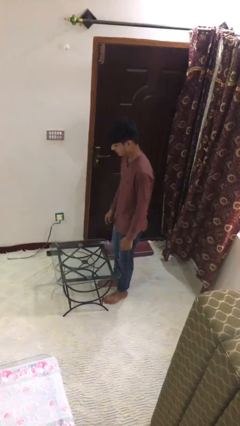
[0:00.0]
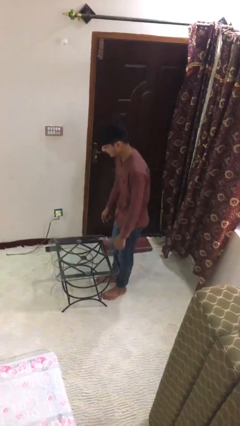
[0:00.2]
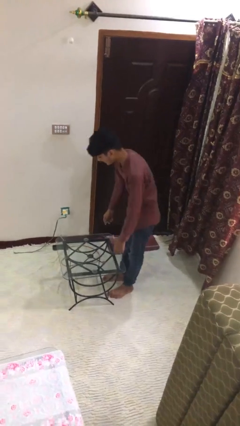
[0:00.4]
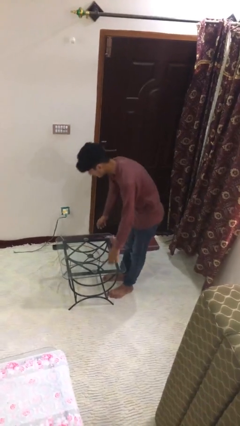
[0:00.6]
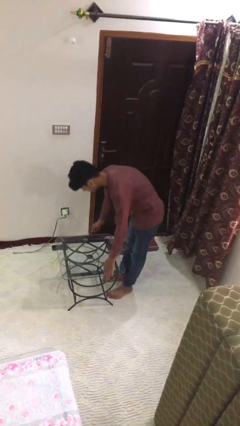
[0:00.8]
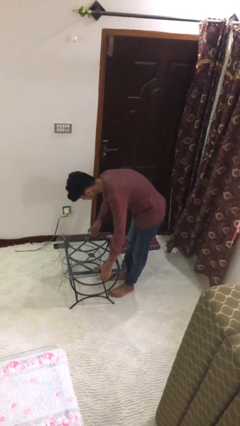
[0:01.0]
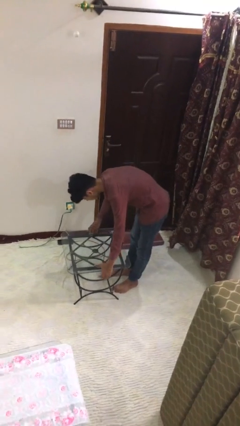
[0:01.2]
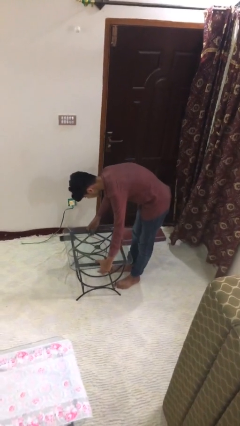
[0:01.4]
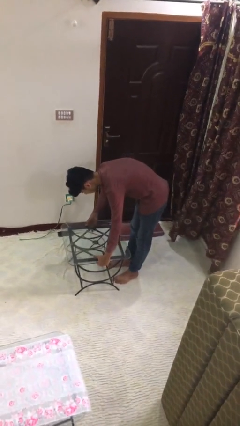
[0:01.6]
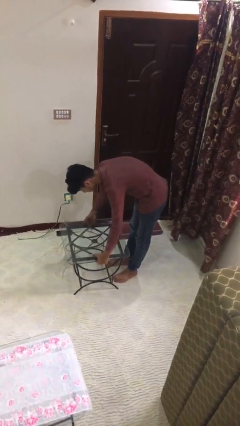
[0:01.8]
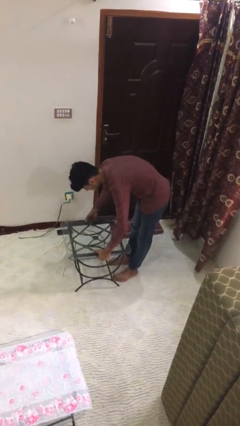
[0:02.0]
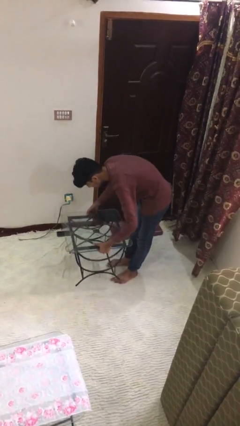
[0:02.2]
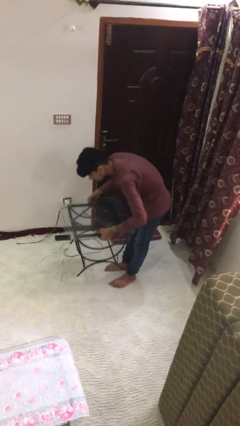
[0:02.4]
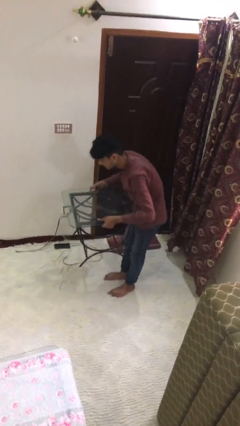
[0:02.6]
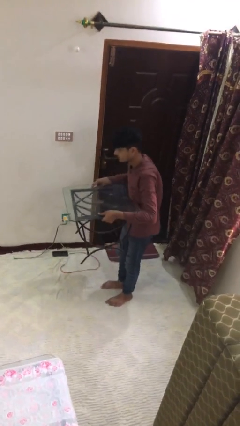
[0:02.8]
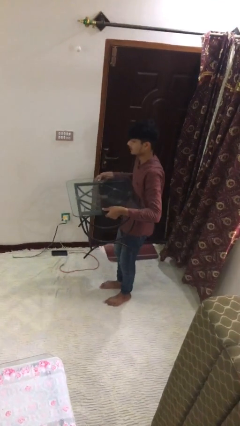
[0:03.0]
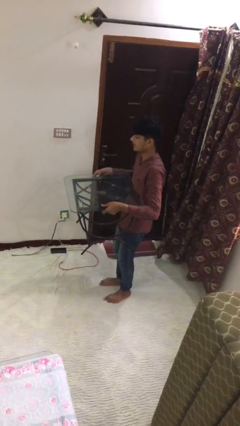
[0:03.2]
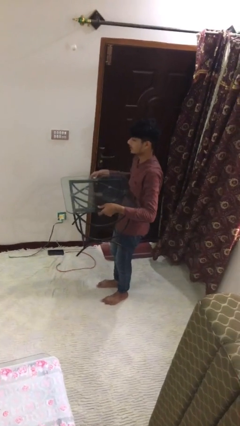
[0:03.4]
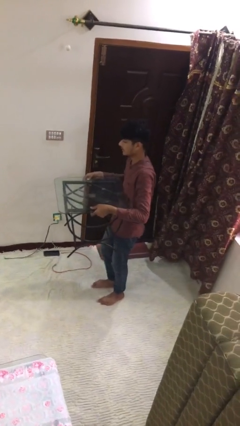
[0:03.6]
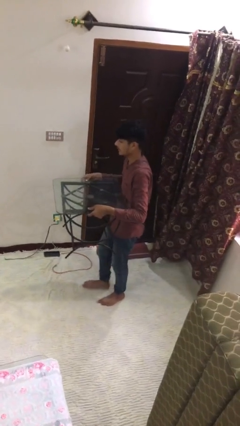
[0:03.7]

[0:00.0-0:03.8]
person picks up object from floor

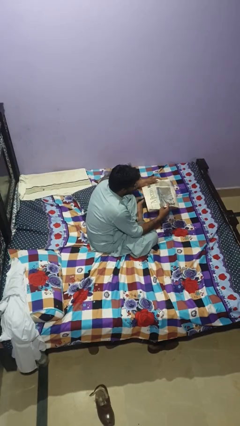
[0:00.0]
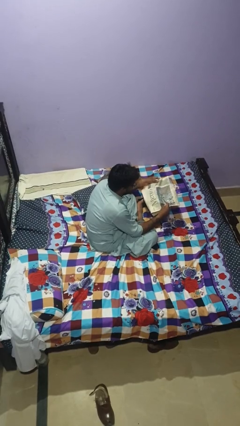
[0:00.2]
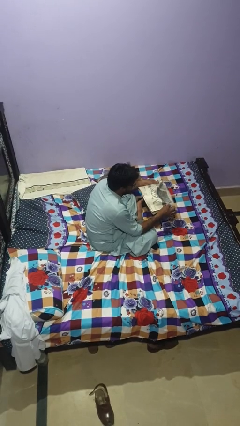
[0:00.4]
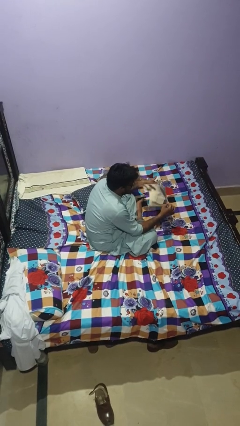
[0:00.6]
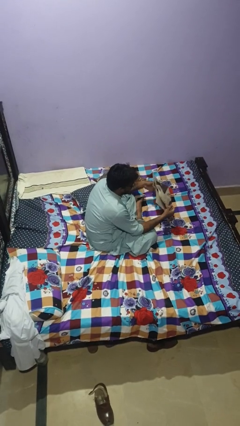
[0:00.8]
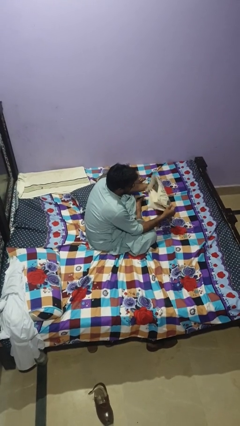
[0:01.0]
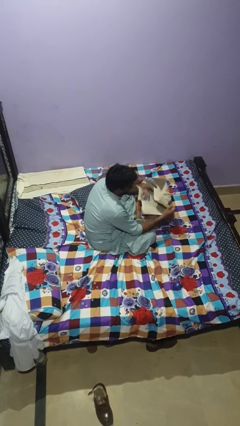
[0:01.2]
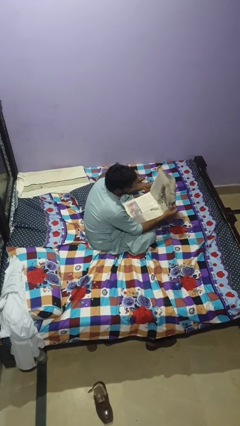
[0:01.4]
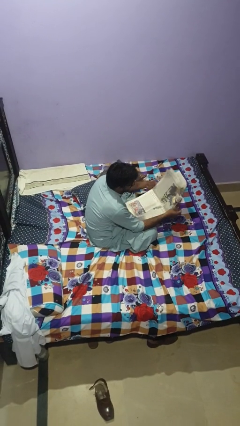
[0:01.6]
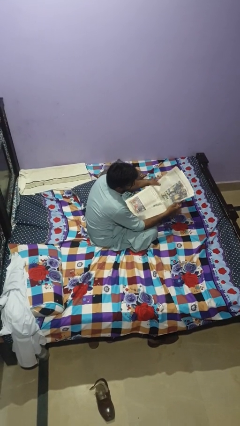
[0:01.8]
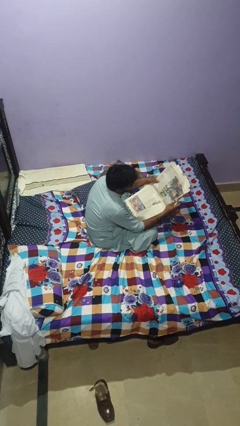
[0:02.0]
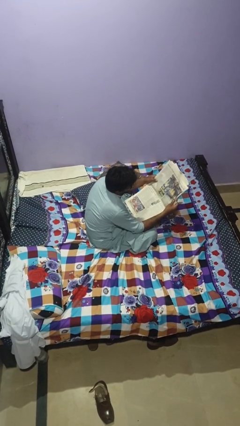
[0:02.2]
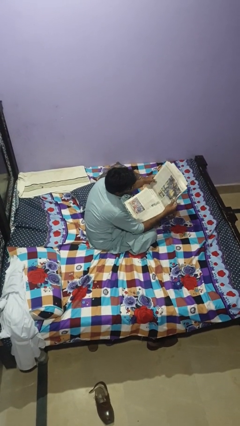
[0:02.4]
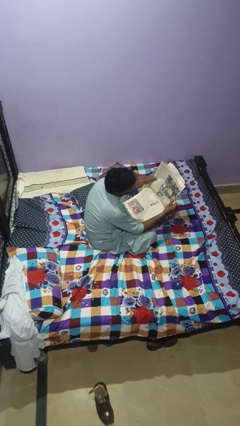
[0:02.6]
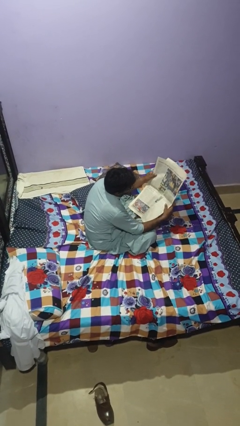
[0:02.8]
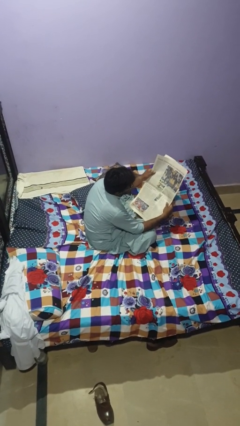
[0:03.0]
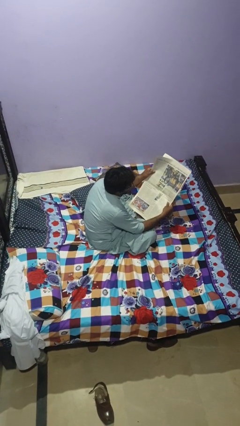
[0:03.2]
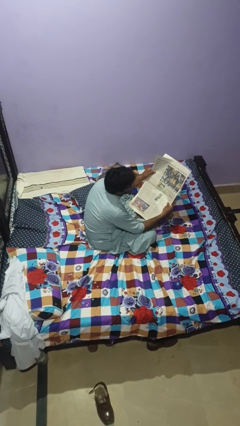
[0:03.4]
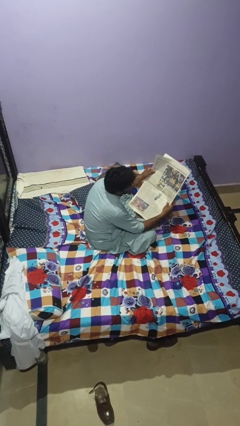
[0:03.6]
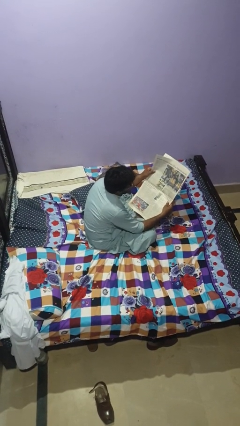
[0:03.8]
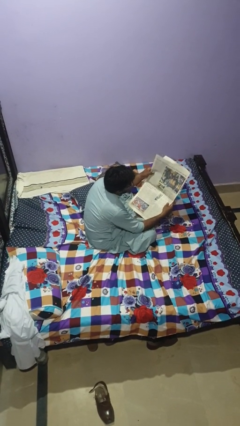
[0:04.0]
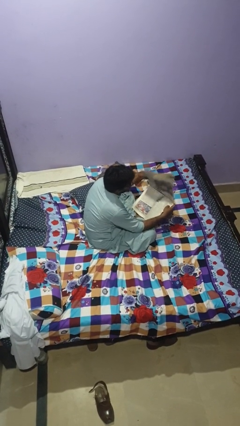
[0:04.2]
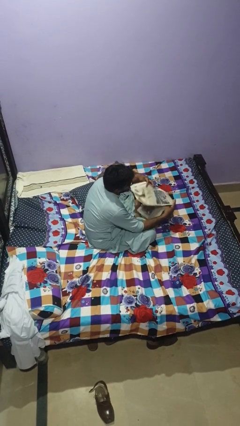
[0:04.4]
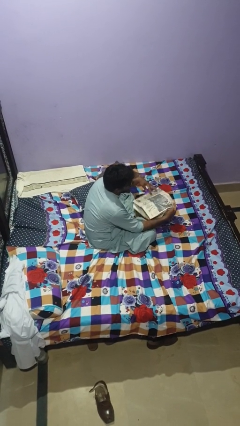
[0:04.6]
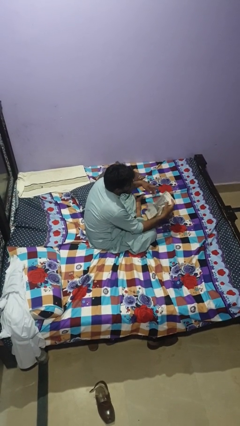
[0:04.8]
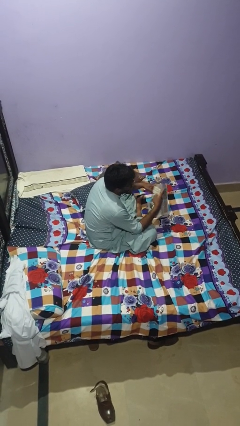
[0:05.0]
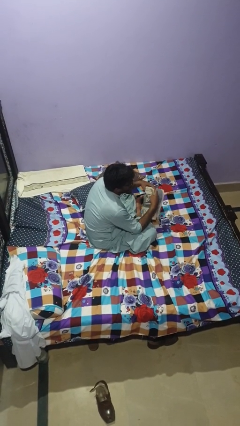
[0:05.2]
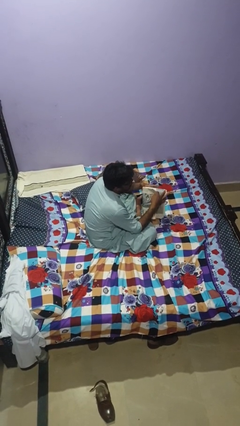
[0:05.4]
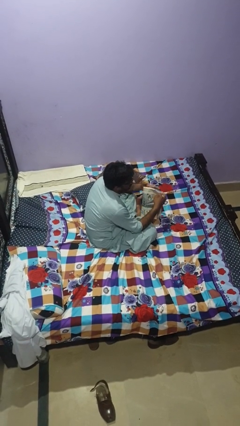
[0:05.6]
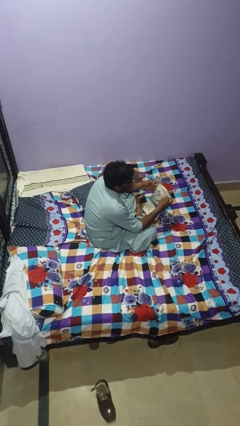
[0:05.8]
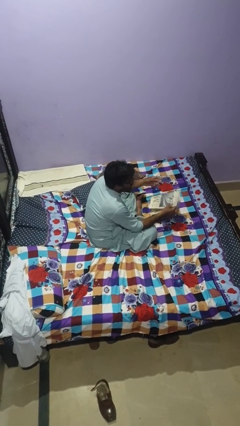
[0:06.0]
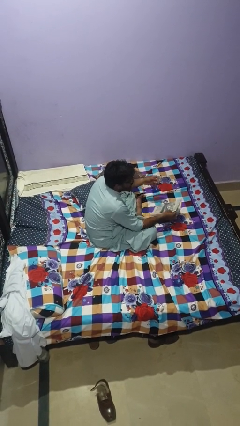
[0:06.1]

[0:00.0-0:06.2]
person reads newspaper

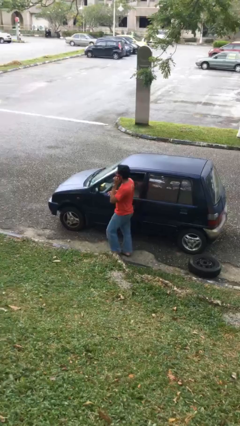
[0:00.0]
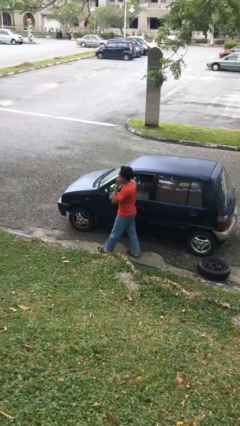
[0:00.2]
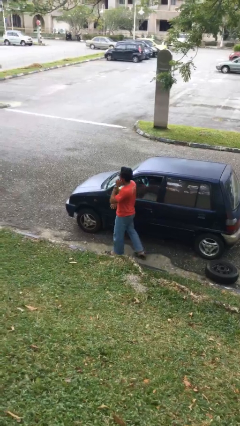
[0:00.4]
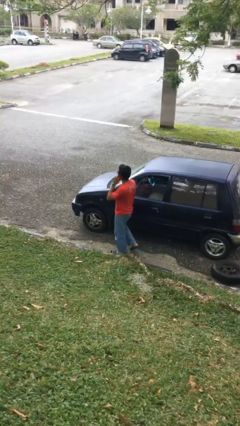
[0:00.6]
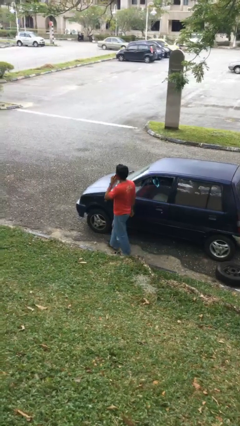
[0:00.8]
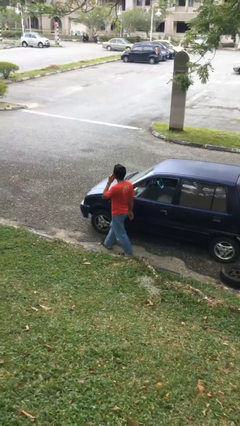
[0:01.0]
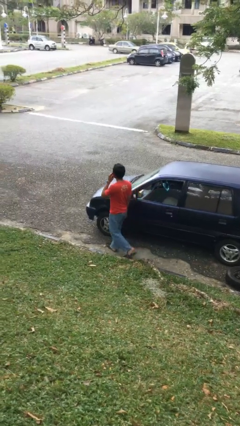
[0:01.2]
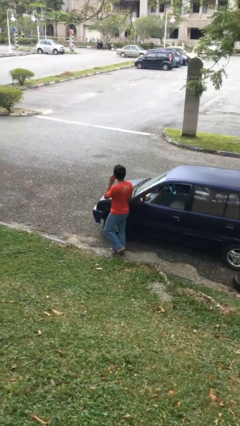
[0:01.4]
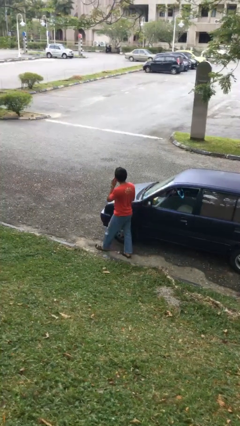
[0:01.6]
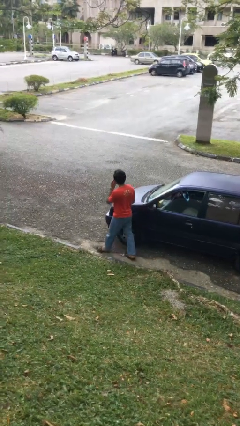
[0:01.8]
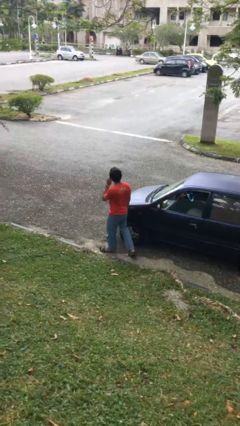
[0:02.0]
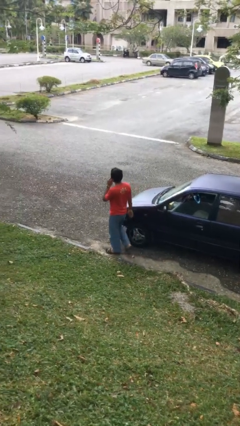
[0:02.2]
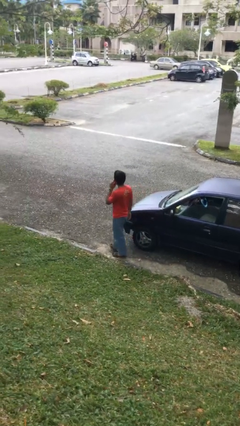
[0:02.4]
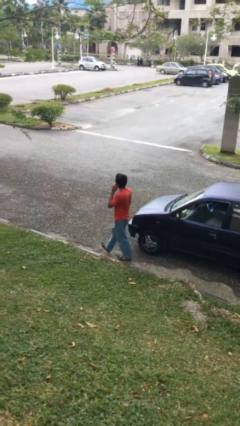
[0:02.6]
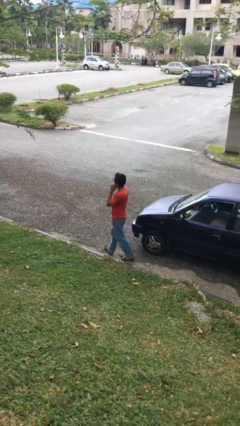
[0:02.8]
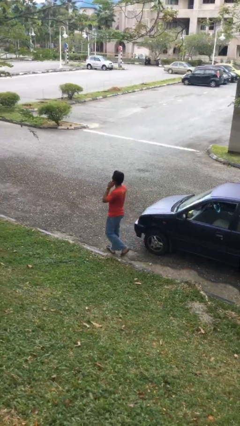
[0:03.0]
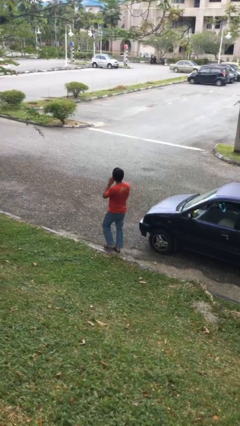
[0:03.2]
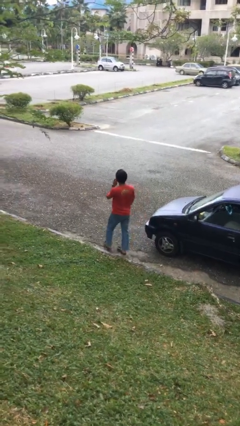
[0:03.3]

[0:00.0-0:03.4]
person talks on phone

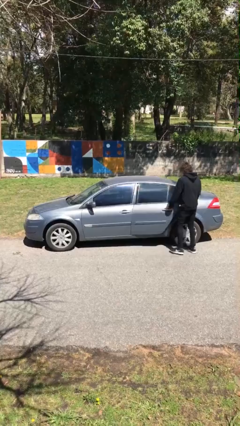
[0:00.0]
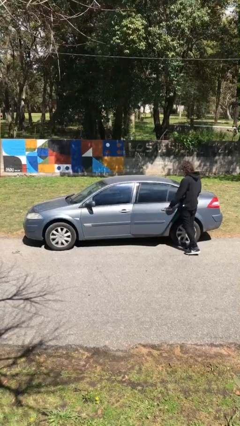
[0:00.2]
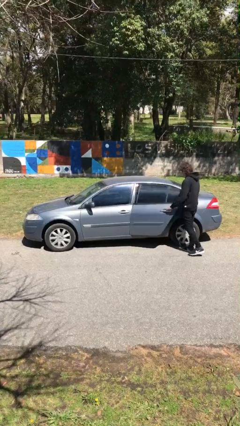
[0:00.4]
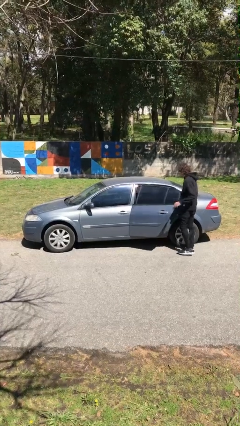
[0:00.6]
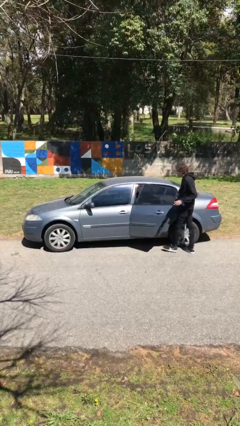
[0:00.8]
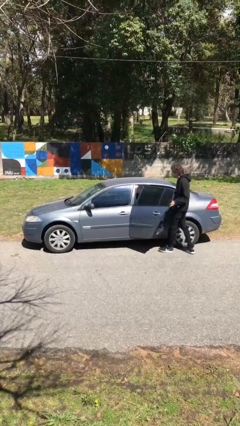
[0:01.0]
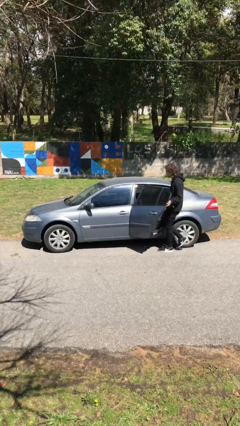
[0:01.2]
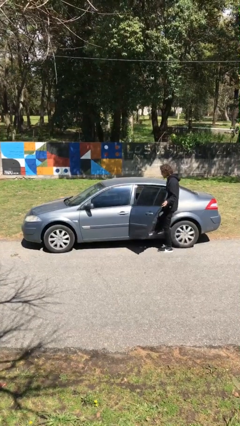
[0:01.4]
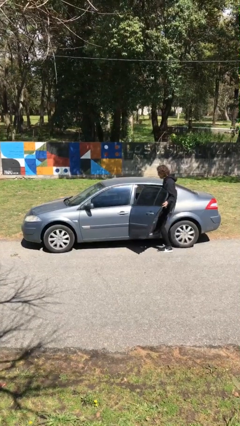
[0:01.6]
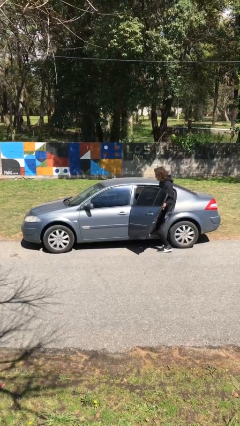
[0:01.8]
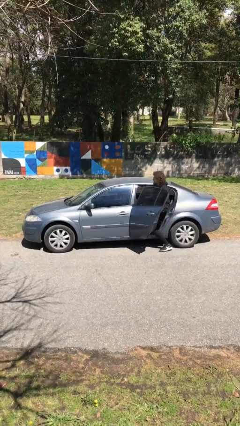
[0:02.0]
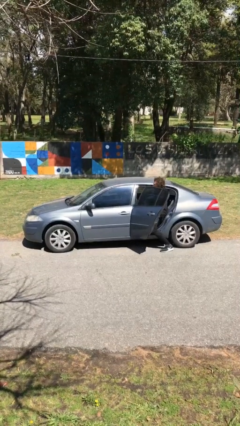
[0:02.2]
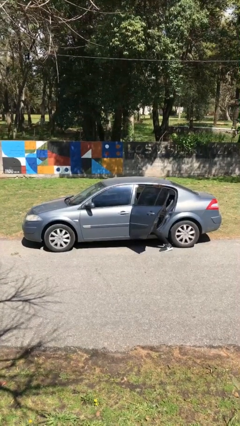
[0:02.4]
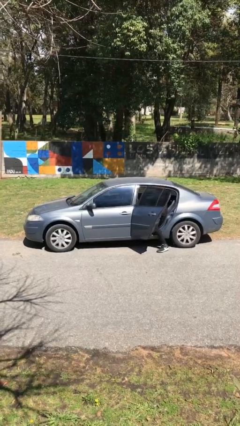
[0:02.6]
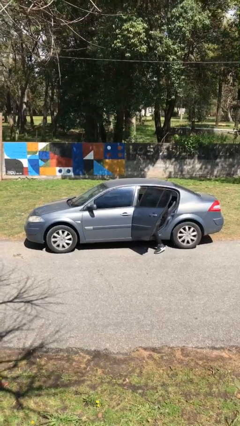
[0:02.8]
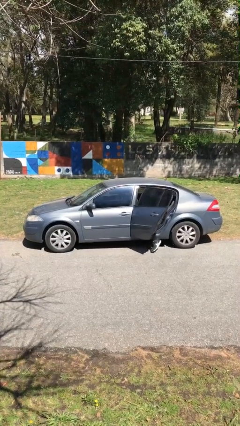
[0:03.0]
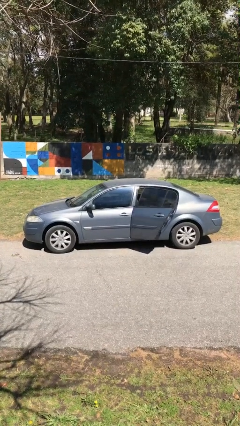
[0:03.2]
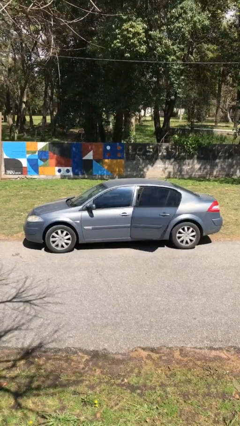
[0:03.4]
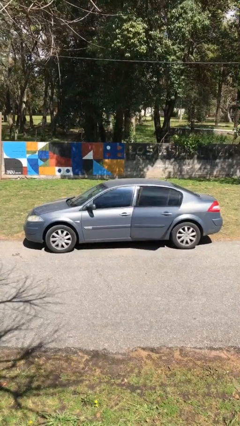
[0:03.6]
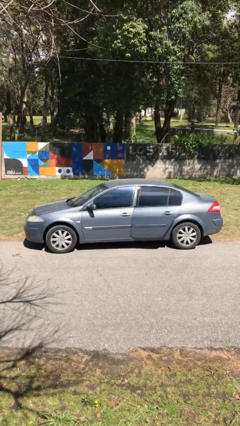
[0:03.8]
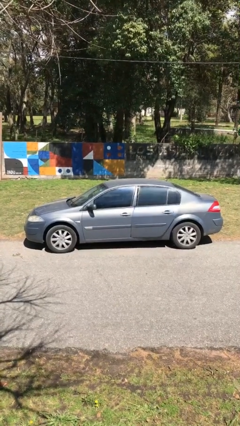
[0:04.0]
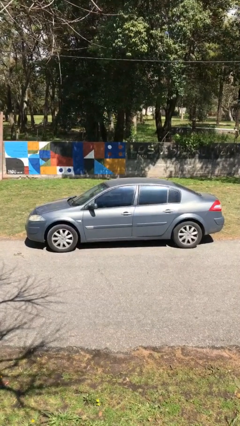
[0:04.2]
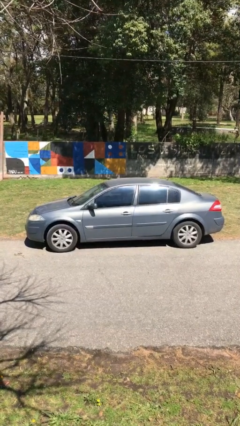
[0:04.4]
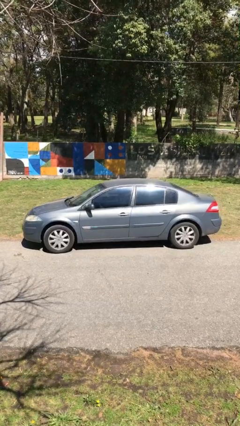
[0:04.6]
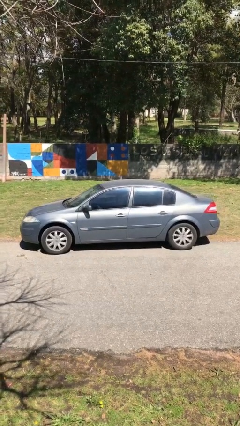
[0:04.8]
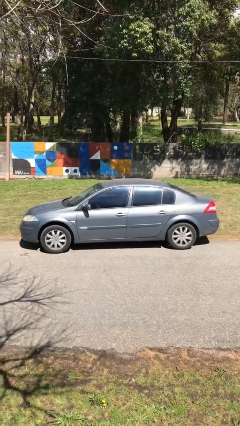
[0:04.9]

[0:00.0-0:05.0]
car picks up person
